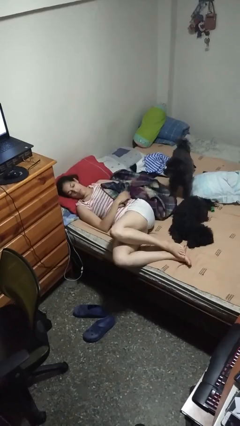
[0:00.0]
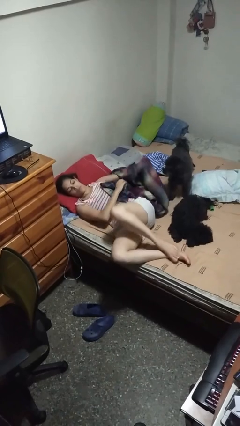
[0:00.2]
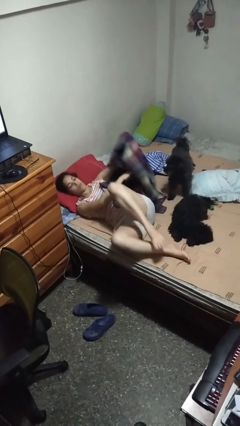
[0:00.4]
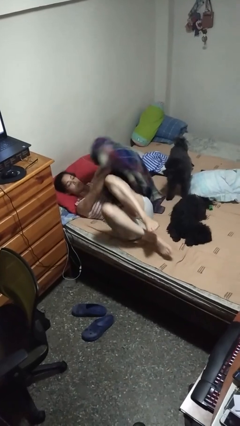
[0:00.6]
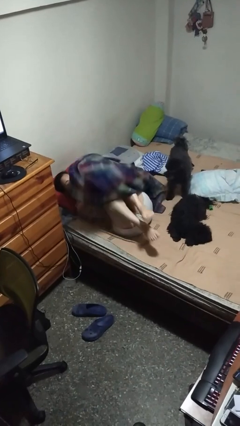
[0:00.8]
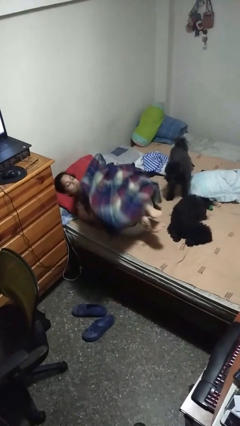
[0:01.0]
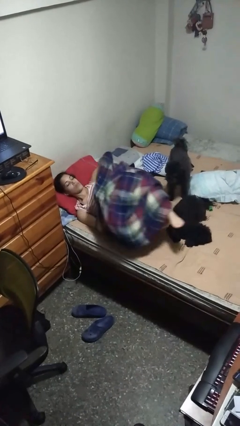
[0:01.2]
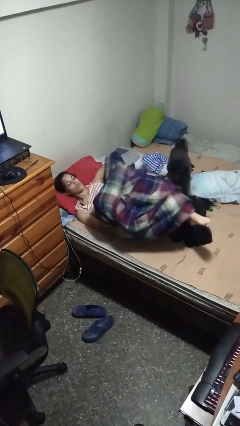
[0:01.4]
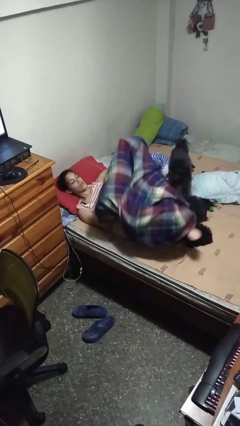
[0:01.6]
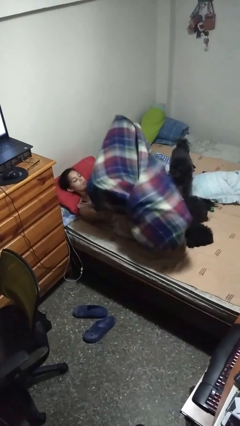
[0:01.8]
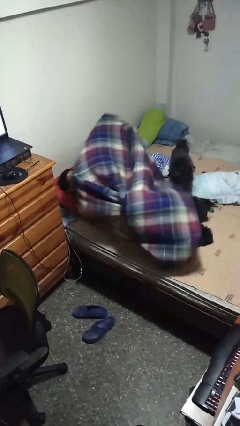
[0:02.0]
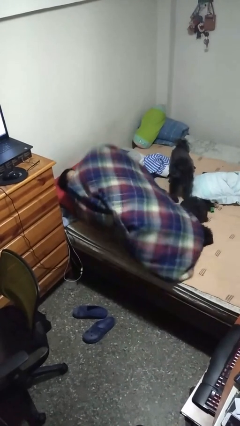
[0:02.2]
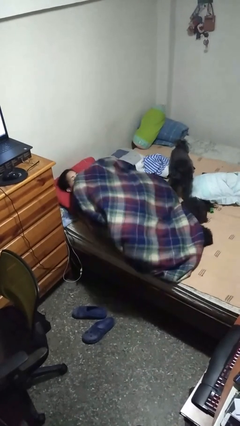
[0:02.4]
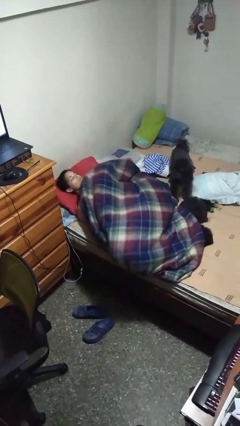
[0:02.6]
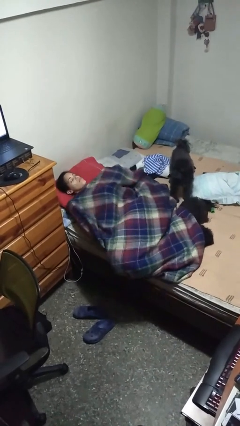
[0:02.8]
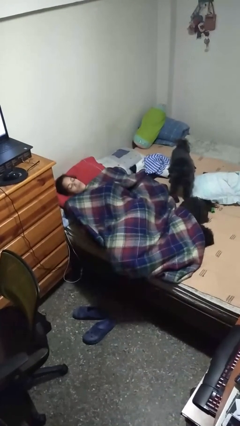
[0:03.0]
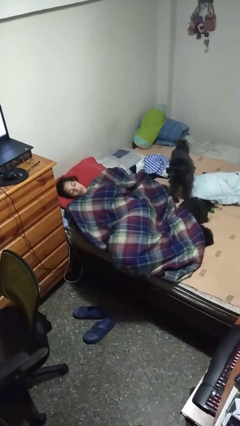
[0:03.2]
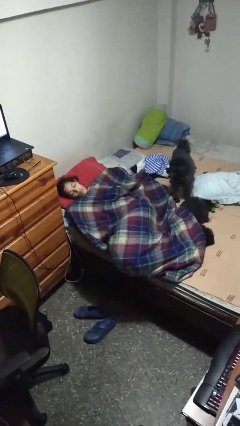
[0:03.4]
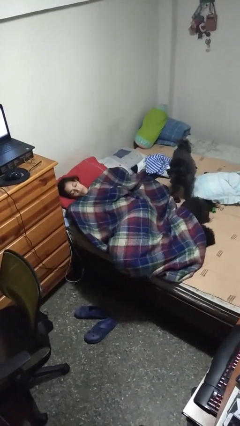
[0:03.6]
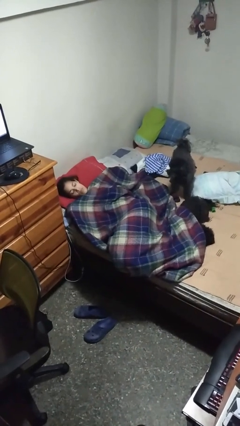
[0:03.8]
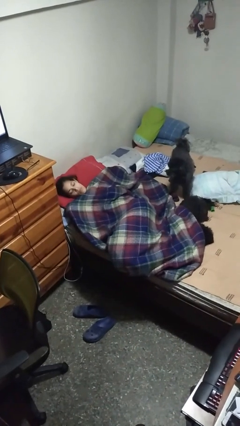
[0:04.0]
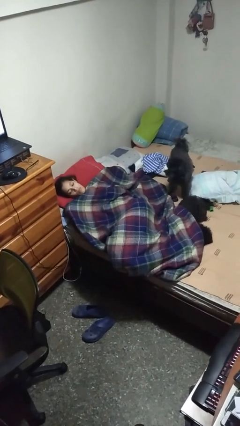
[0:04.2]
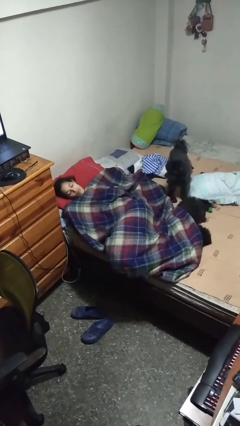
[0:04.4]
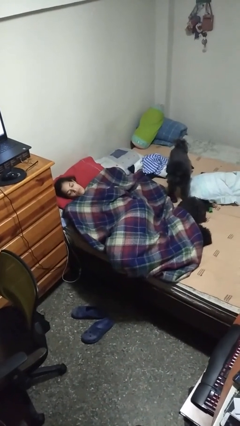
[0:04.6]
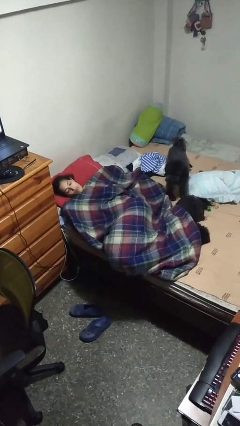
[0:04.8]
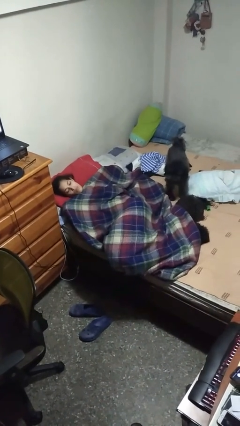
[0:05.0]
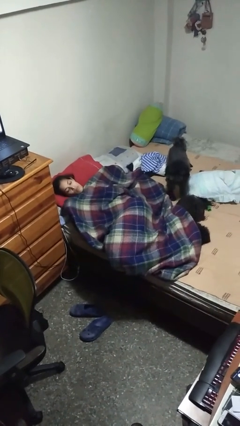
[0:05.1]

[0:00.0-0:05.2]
person covers with bedsheets

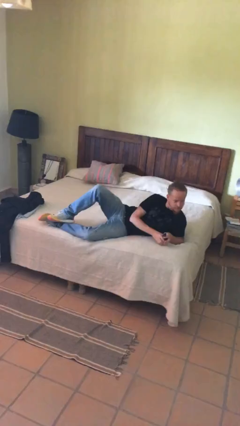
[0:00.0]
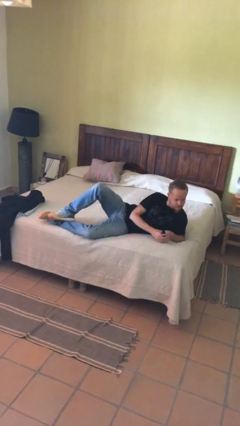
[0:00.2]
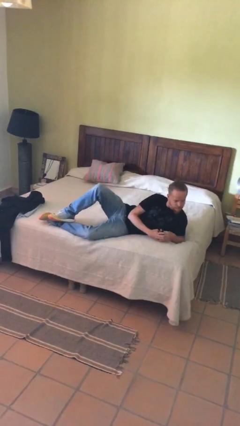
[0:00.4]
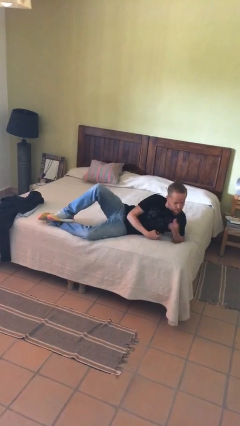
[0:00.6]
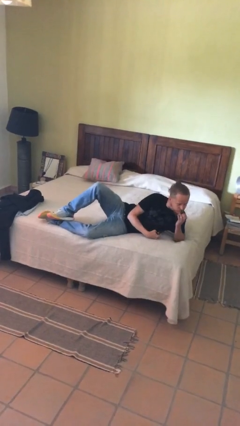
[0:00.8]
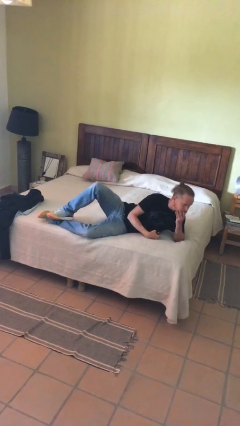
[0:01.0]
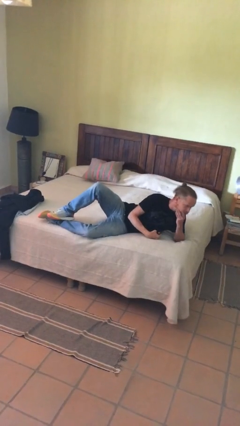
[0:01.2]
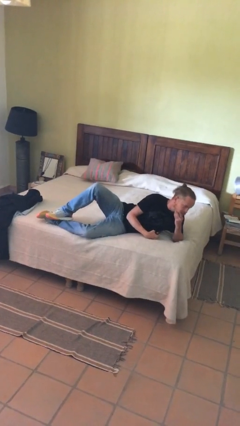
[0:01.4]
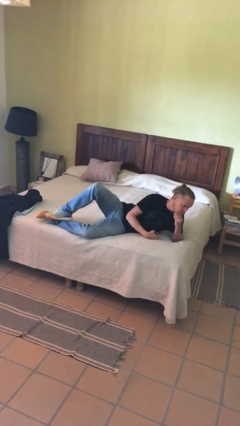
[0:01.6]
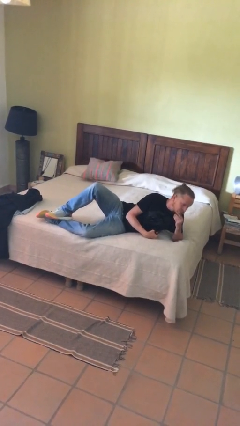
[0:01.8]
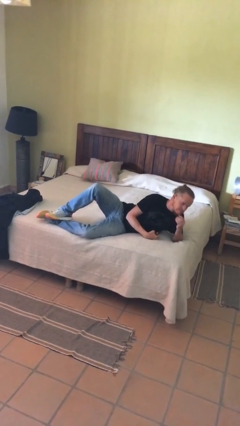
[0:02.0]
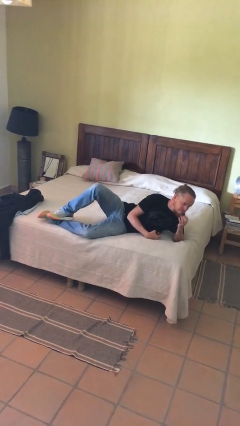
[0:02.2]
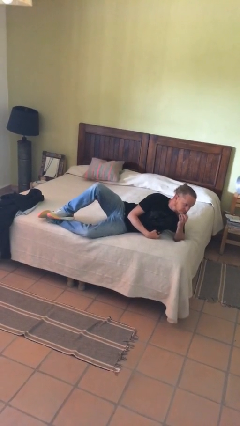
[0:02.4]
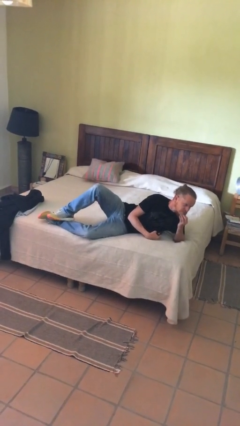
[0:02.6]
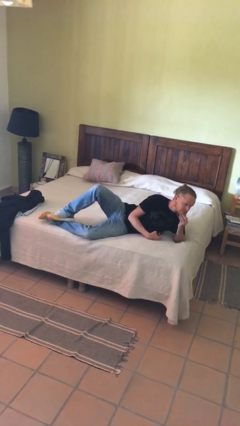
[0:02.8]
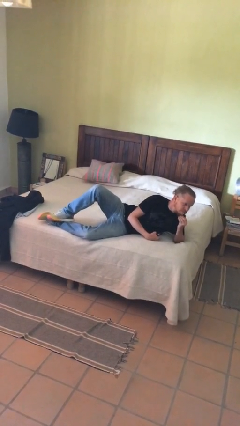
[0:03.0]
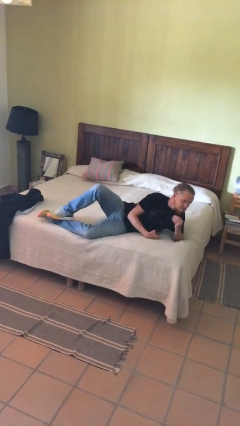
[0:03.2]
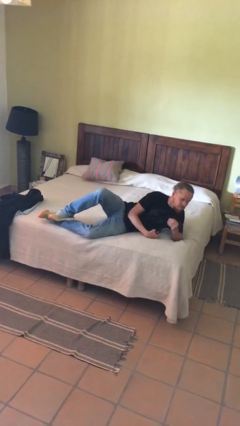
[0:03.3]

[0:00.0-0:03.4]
person strokes chin

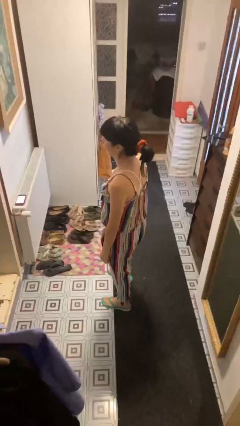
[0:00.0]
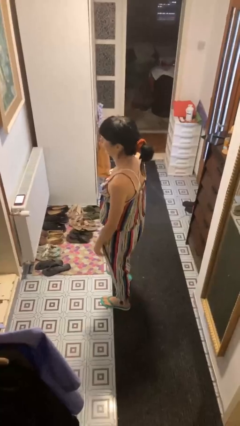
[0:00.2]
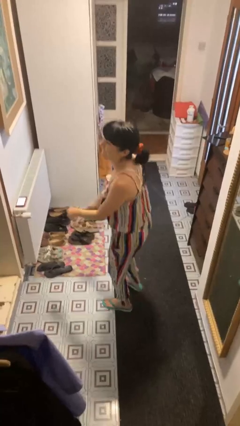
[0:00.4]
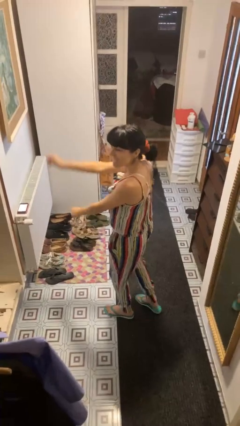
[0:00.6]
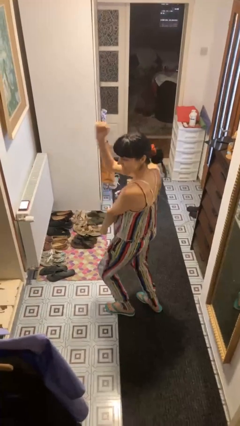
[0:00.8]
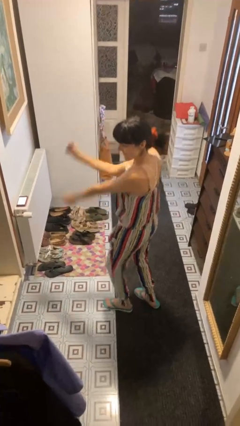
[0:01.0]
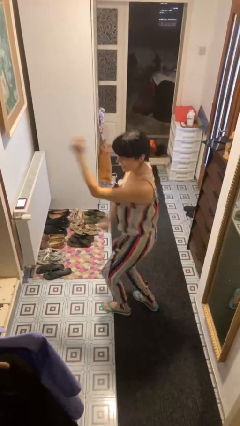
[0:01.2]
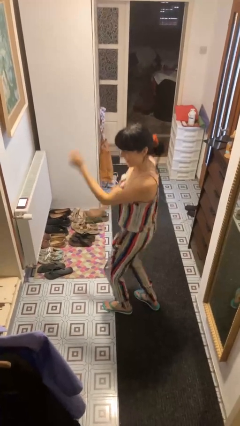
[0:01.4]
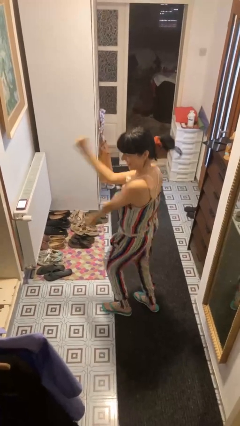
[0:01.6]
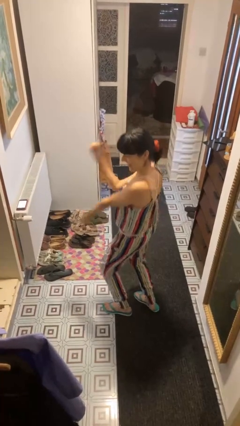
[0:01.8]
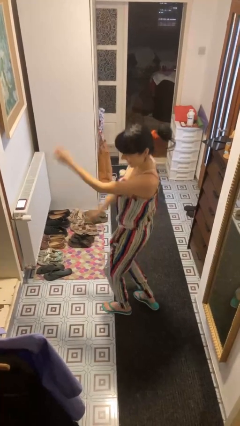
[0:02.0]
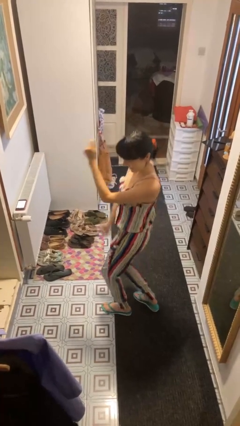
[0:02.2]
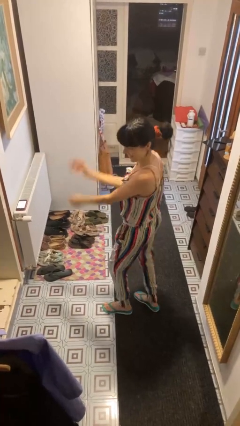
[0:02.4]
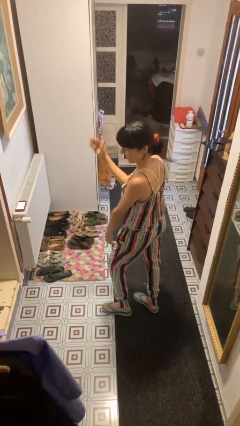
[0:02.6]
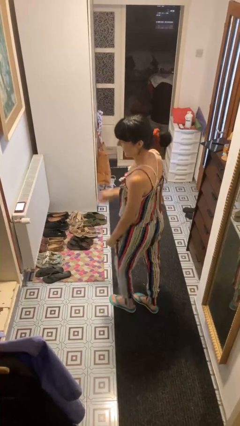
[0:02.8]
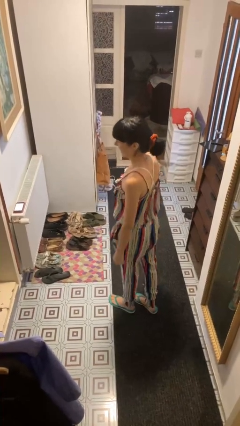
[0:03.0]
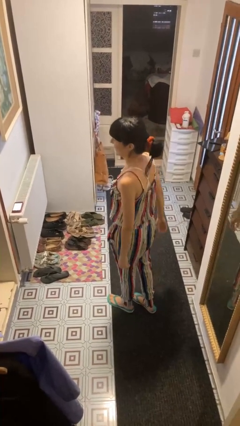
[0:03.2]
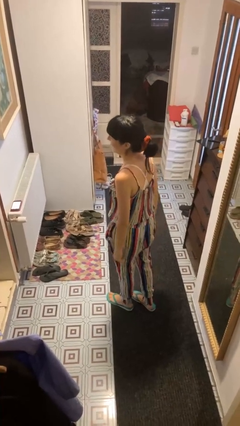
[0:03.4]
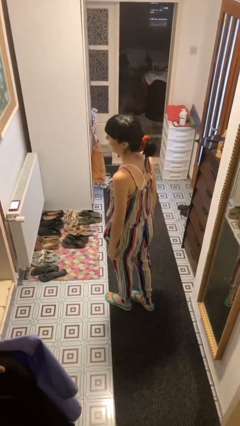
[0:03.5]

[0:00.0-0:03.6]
person dances in place

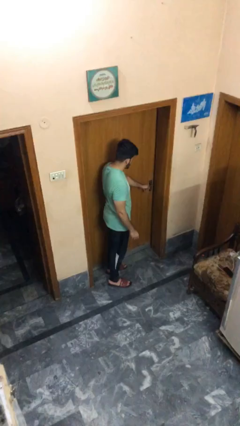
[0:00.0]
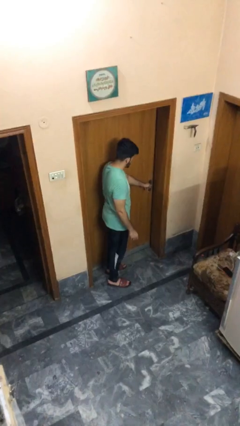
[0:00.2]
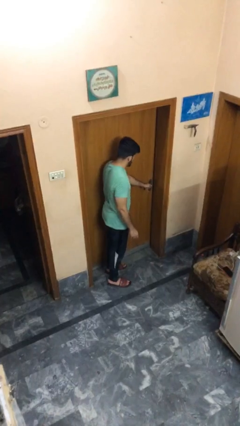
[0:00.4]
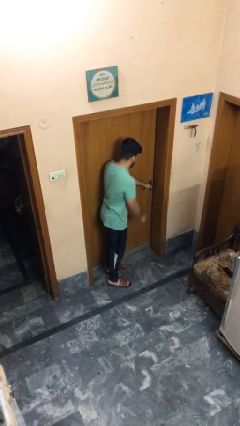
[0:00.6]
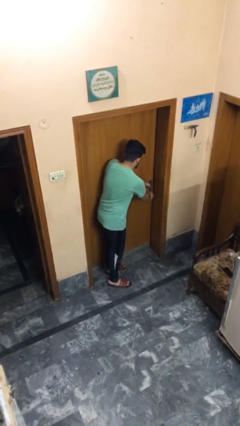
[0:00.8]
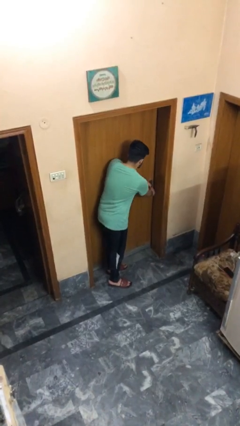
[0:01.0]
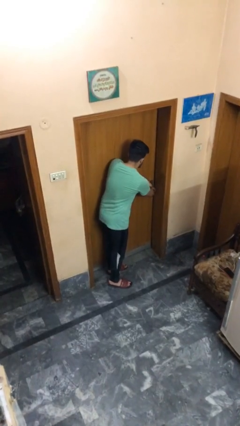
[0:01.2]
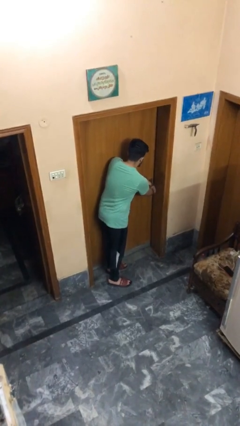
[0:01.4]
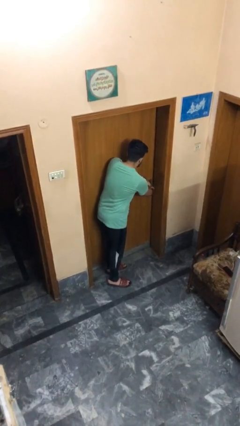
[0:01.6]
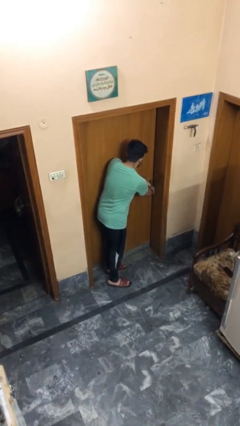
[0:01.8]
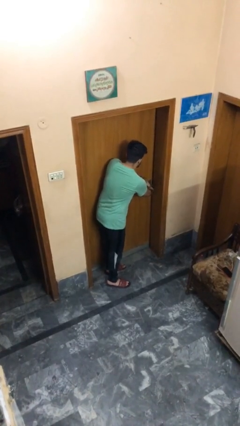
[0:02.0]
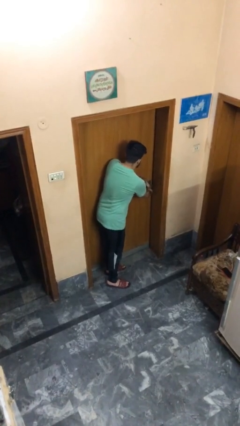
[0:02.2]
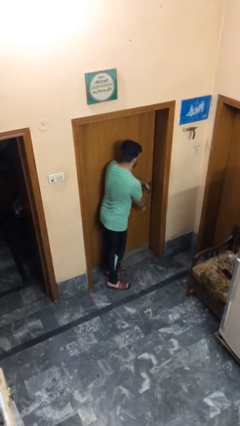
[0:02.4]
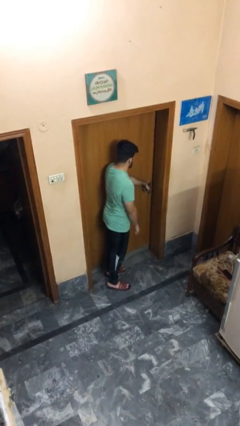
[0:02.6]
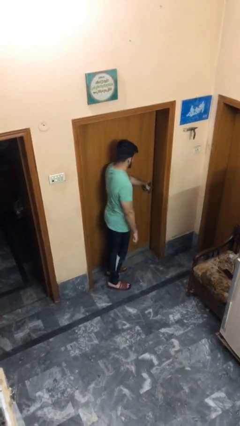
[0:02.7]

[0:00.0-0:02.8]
person unlocks door with keys

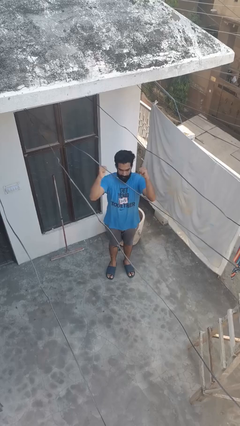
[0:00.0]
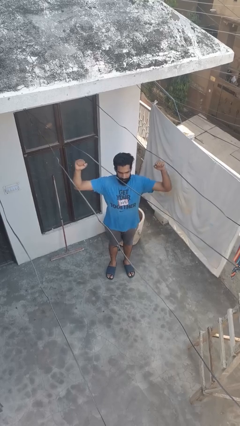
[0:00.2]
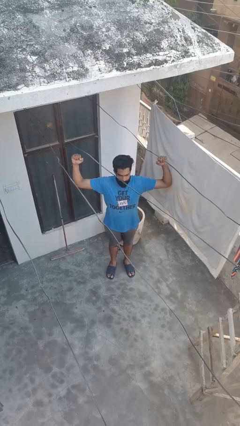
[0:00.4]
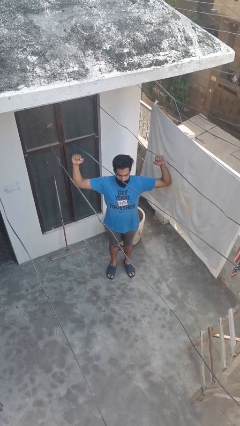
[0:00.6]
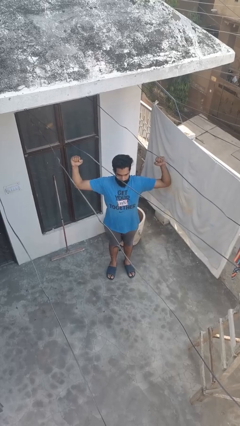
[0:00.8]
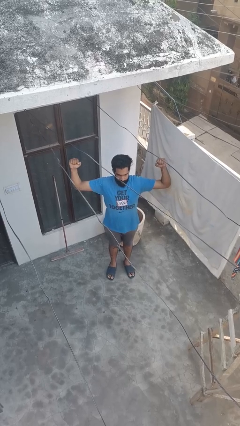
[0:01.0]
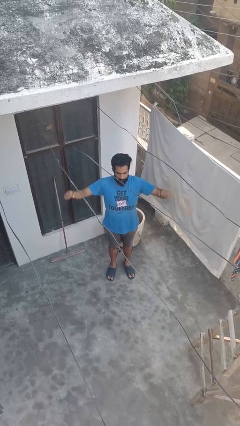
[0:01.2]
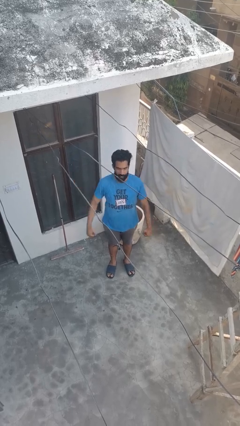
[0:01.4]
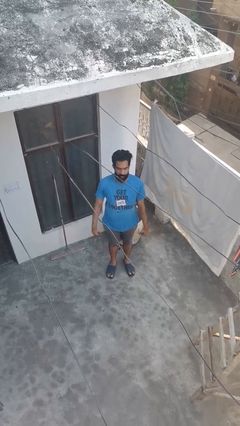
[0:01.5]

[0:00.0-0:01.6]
person gestures zoom out

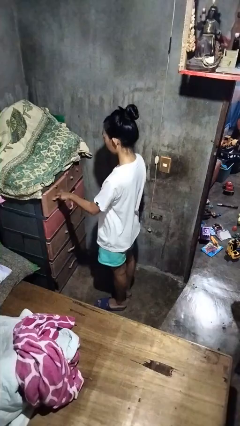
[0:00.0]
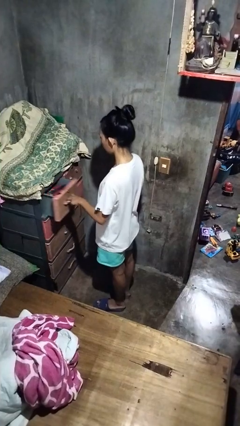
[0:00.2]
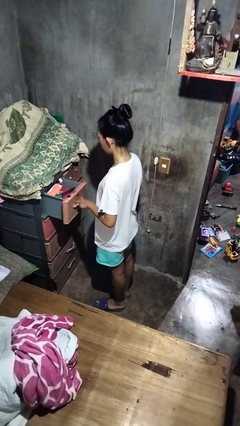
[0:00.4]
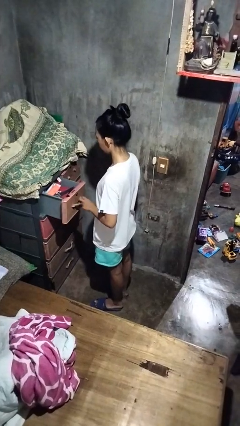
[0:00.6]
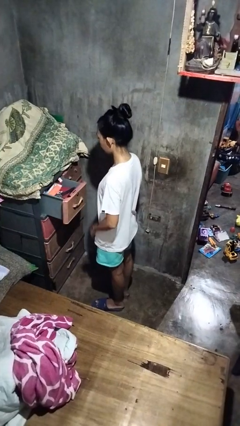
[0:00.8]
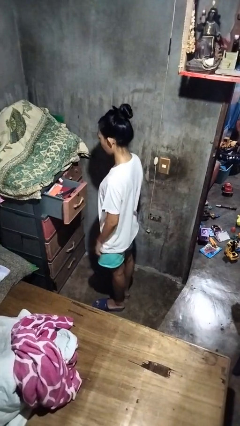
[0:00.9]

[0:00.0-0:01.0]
person opens dresser drawer
